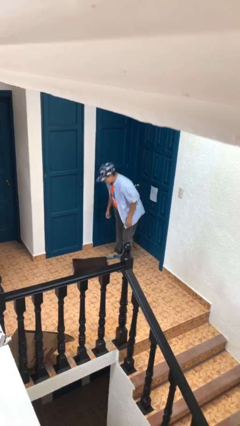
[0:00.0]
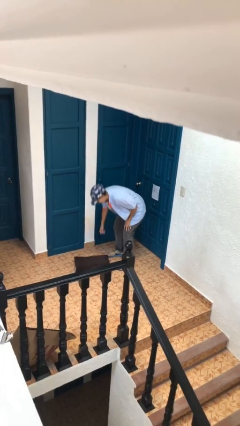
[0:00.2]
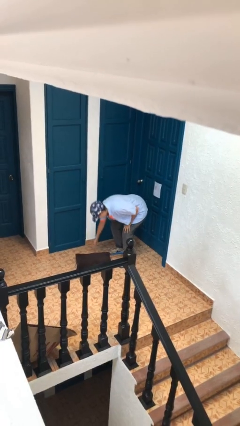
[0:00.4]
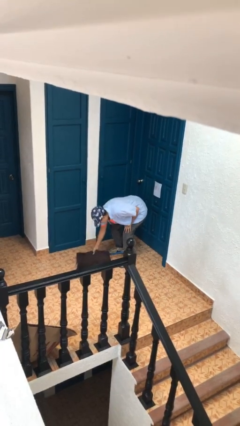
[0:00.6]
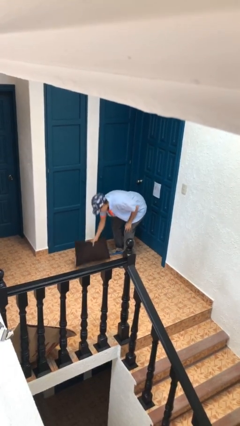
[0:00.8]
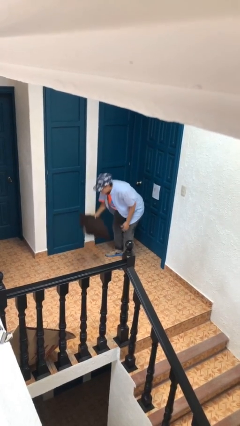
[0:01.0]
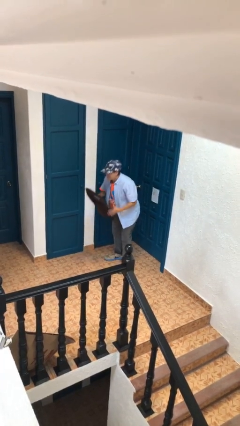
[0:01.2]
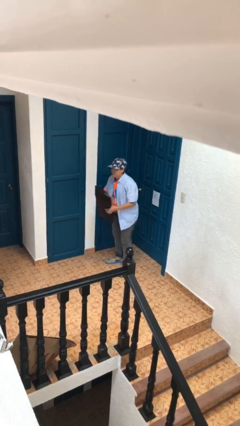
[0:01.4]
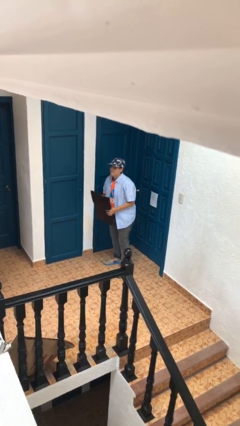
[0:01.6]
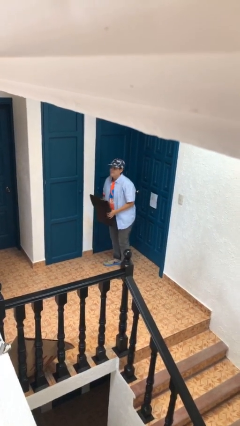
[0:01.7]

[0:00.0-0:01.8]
person picks up object from floor

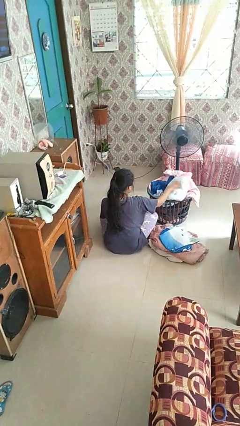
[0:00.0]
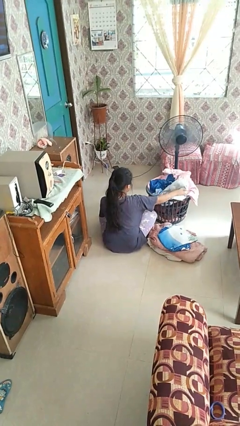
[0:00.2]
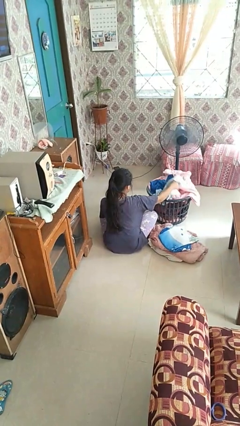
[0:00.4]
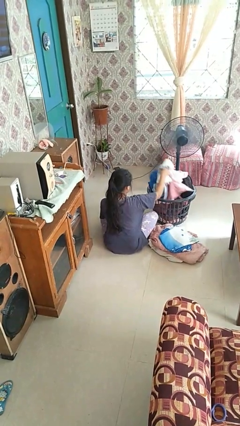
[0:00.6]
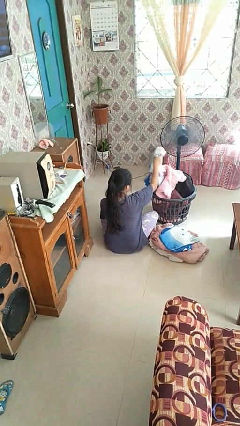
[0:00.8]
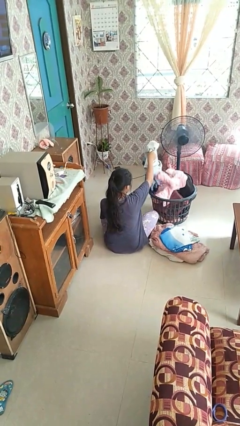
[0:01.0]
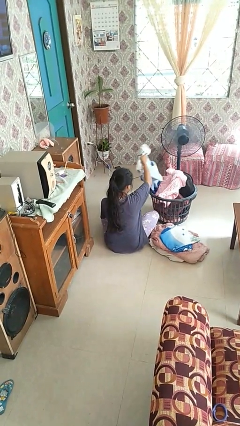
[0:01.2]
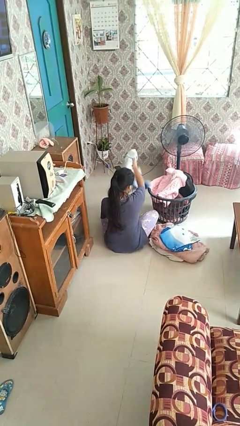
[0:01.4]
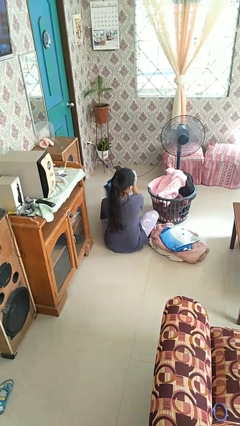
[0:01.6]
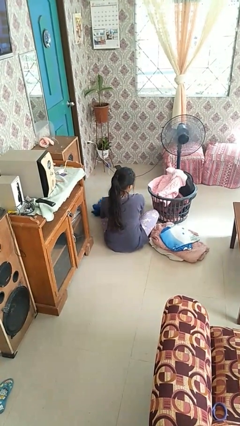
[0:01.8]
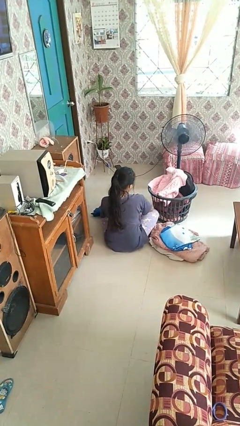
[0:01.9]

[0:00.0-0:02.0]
person takes object from basket

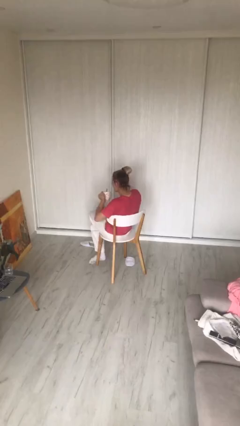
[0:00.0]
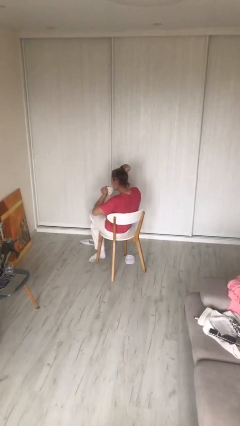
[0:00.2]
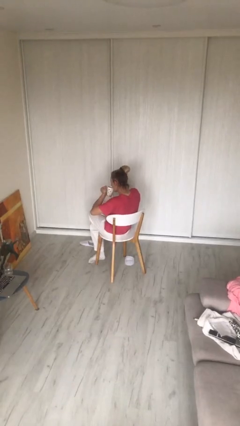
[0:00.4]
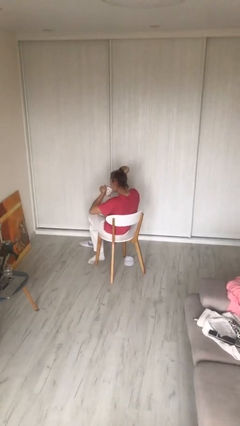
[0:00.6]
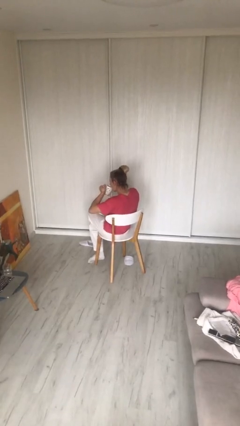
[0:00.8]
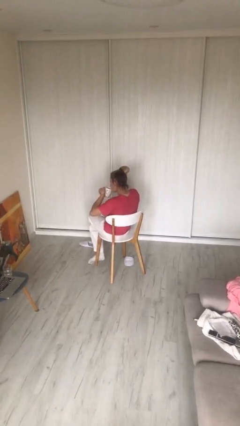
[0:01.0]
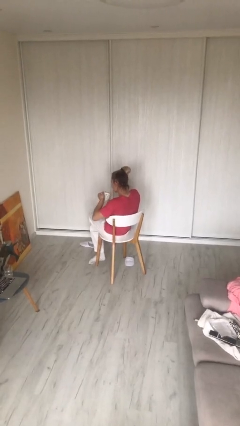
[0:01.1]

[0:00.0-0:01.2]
person drinks from mug

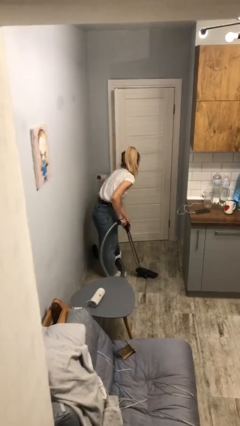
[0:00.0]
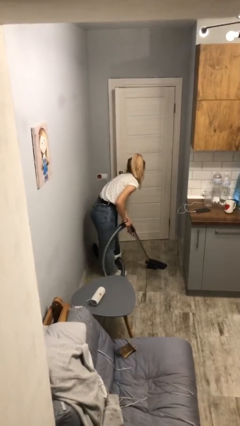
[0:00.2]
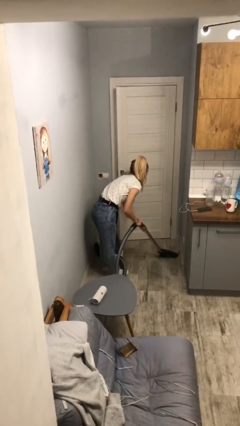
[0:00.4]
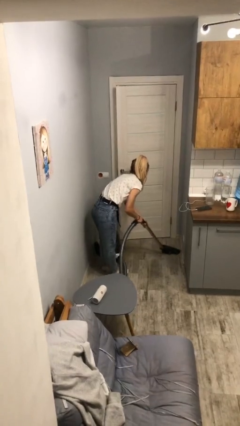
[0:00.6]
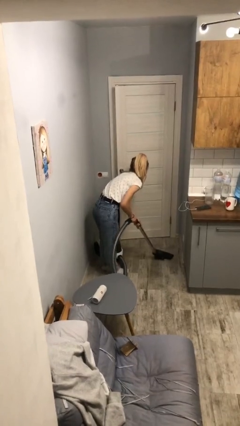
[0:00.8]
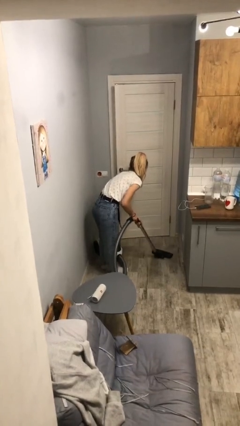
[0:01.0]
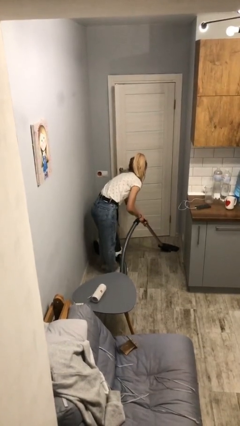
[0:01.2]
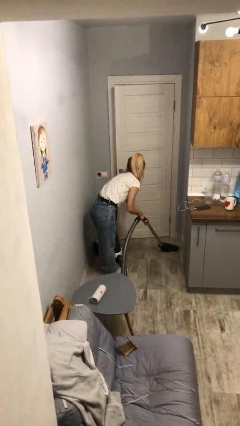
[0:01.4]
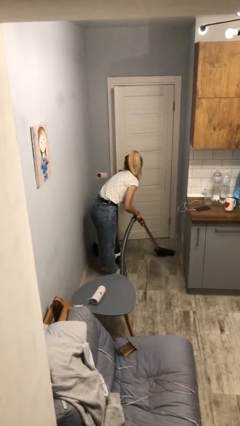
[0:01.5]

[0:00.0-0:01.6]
person vacuums carpet

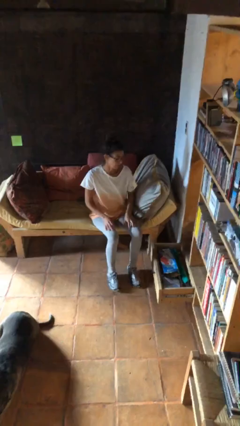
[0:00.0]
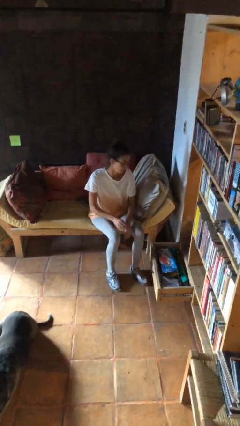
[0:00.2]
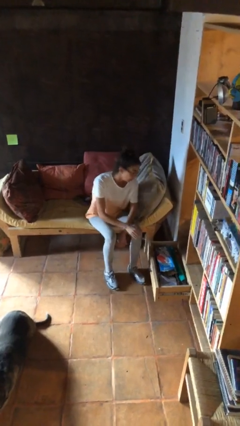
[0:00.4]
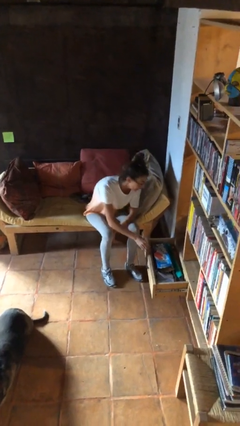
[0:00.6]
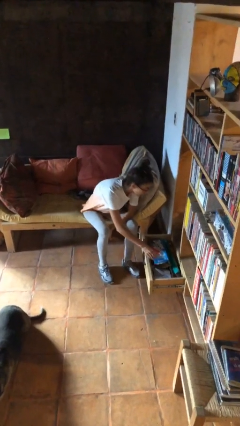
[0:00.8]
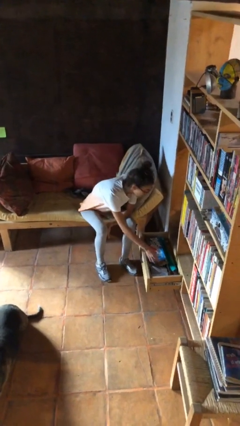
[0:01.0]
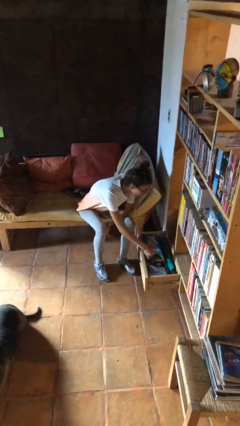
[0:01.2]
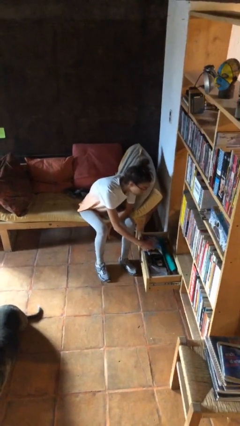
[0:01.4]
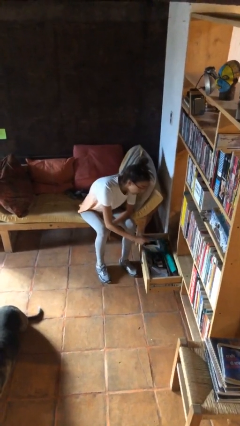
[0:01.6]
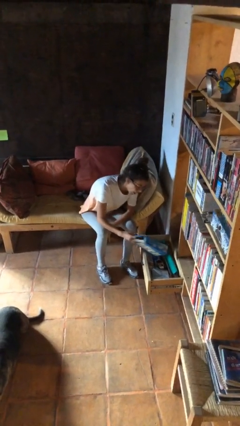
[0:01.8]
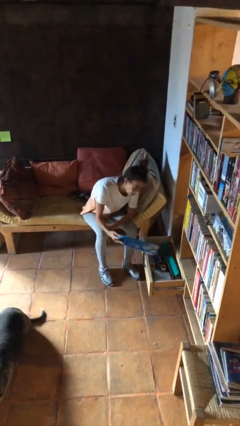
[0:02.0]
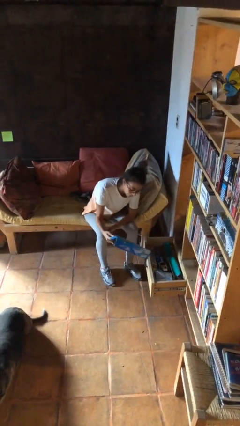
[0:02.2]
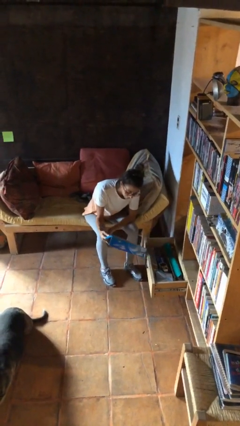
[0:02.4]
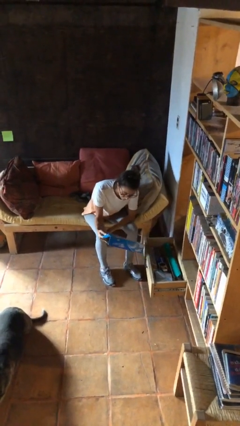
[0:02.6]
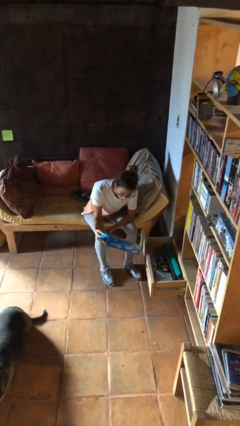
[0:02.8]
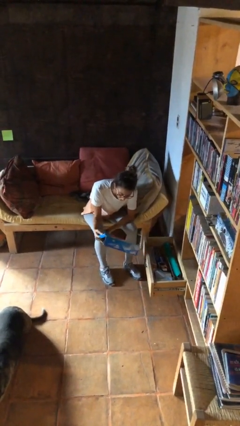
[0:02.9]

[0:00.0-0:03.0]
person picks up object from cabinet

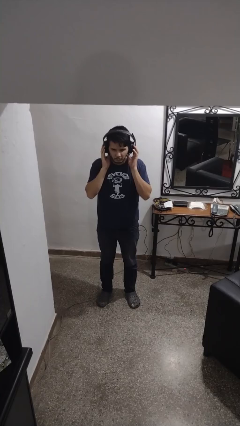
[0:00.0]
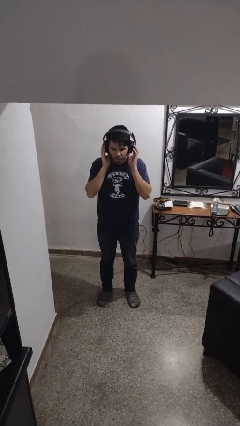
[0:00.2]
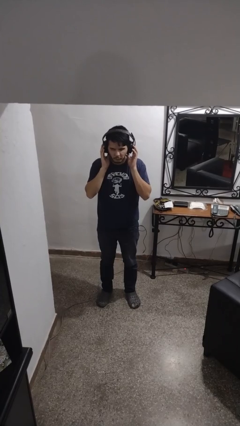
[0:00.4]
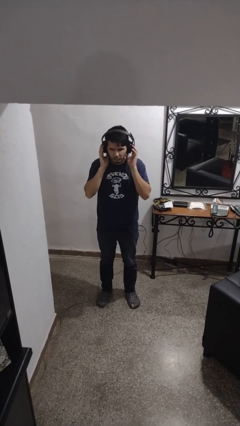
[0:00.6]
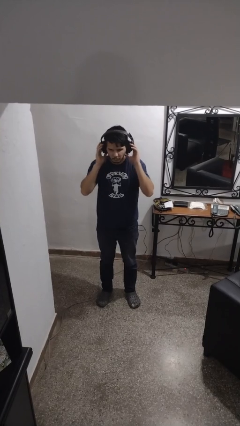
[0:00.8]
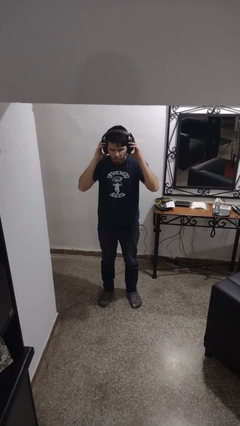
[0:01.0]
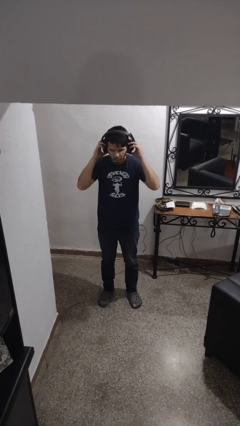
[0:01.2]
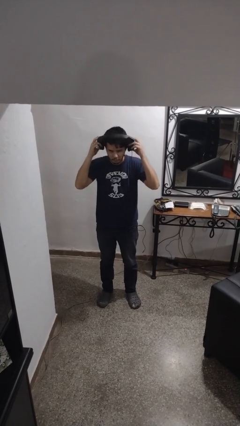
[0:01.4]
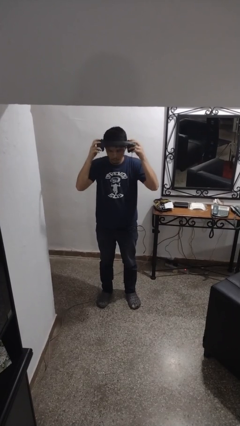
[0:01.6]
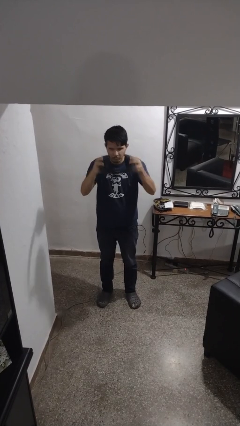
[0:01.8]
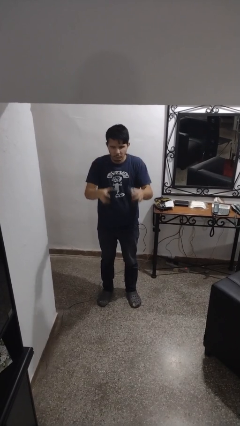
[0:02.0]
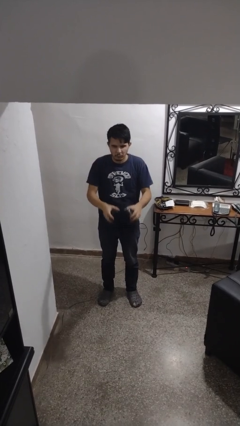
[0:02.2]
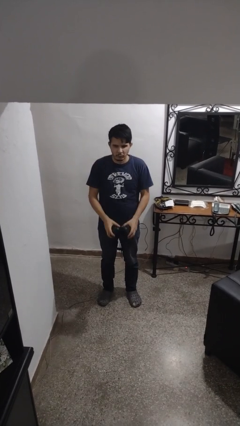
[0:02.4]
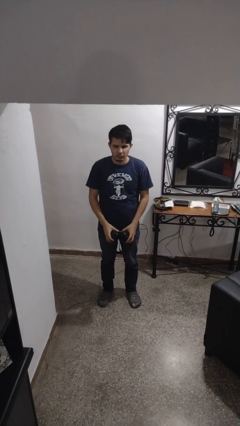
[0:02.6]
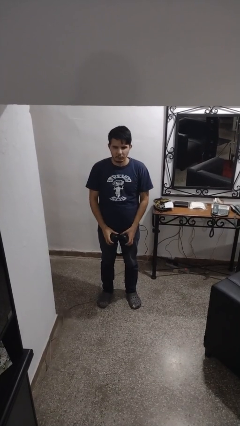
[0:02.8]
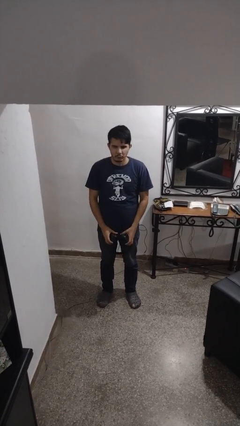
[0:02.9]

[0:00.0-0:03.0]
person takes off headphones

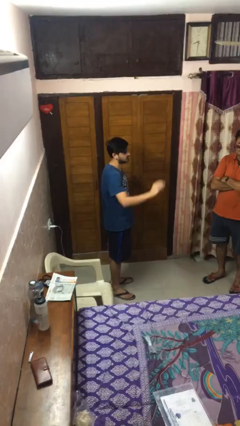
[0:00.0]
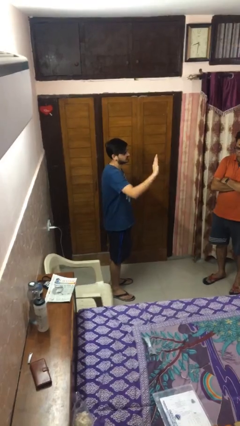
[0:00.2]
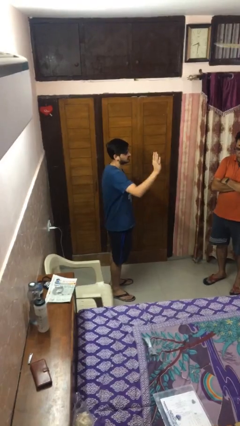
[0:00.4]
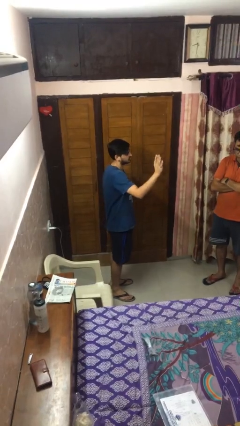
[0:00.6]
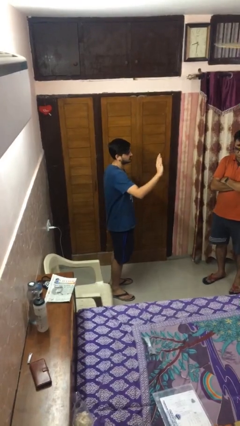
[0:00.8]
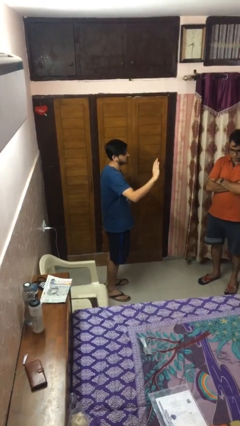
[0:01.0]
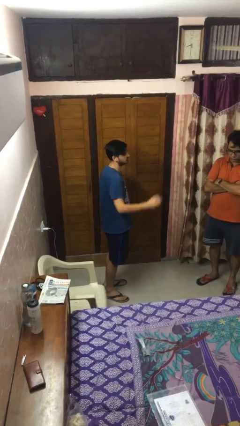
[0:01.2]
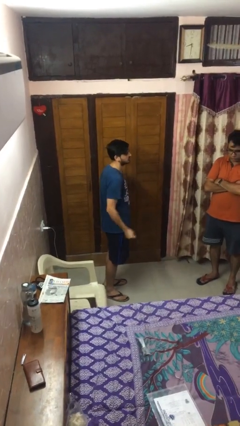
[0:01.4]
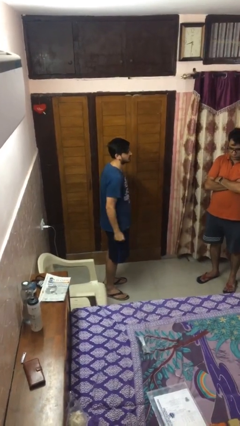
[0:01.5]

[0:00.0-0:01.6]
person waves at person

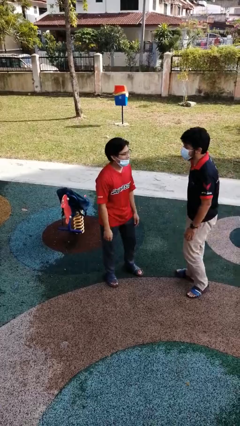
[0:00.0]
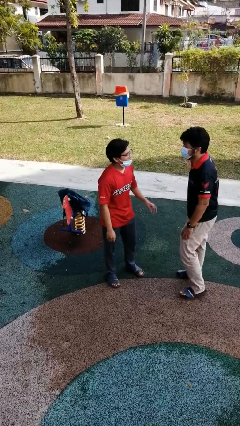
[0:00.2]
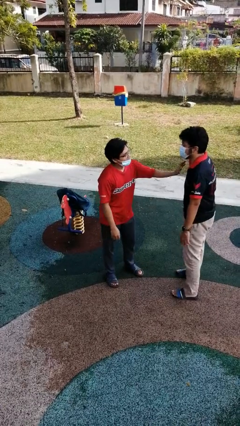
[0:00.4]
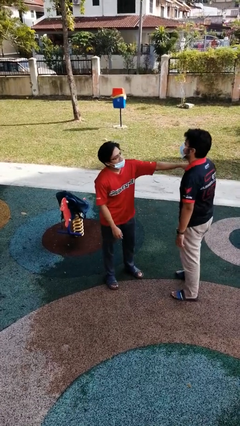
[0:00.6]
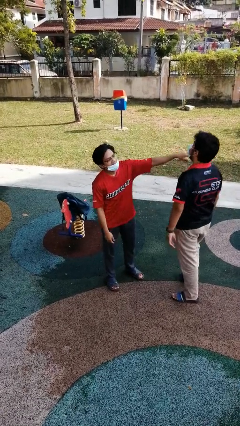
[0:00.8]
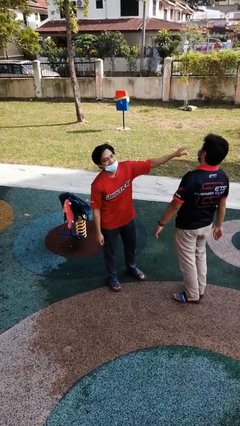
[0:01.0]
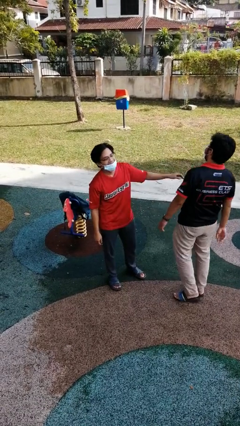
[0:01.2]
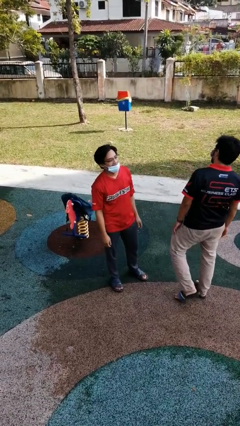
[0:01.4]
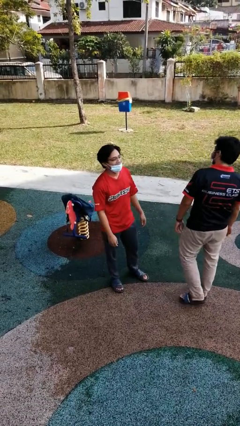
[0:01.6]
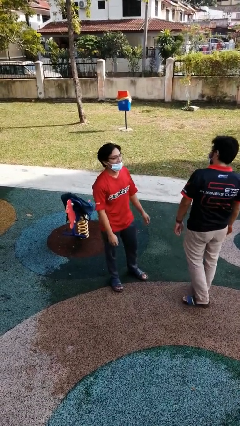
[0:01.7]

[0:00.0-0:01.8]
person shoves person

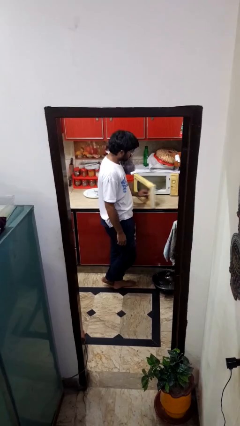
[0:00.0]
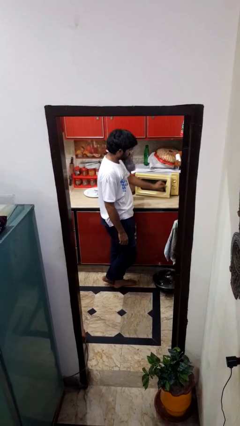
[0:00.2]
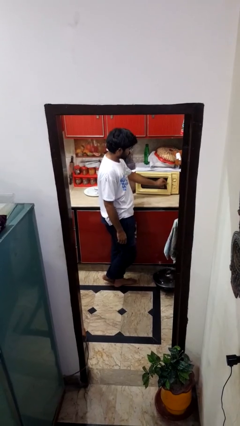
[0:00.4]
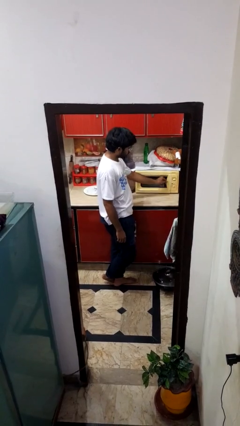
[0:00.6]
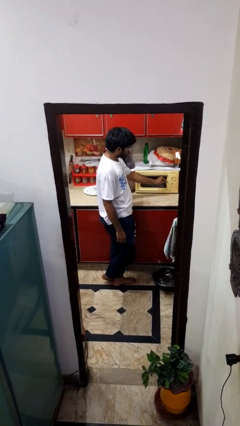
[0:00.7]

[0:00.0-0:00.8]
person closes oven door
